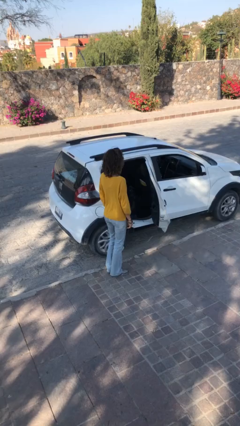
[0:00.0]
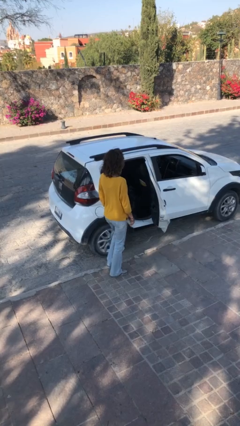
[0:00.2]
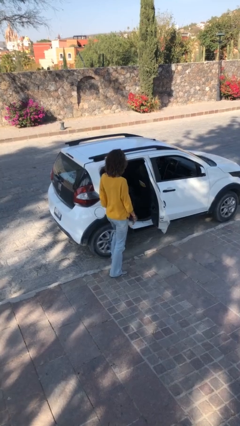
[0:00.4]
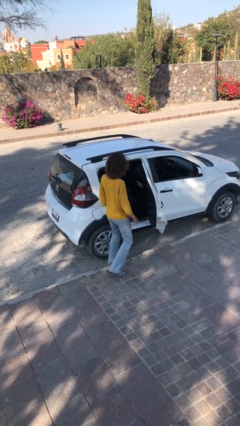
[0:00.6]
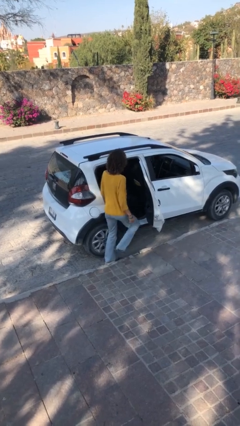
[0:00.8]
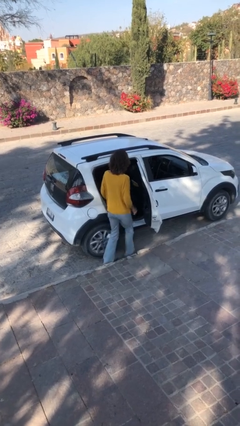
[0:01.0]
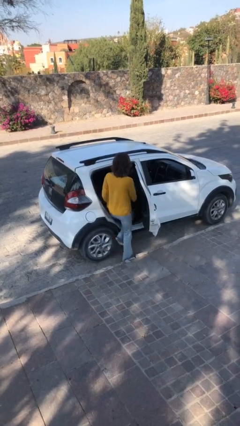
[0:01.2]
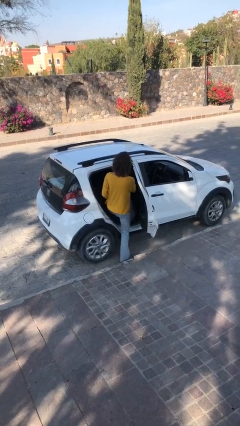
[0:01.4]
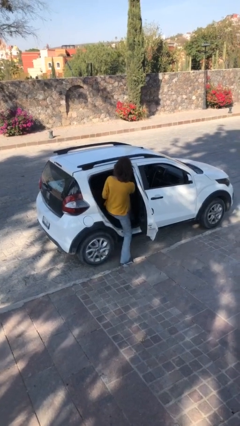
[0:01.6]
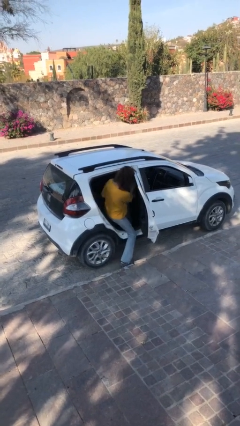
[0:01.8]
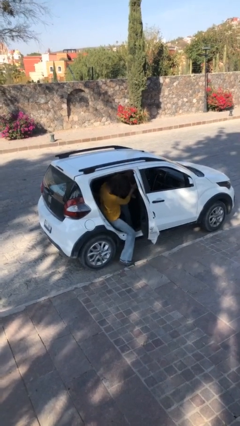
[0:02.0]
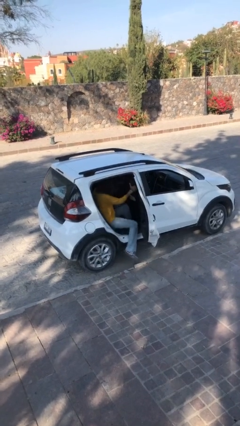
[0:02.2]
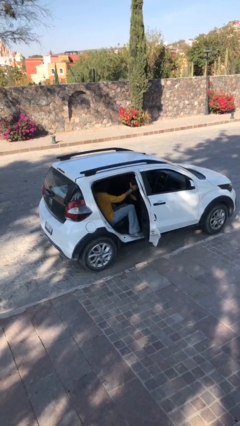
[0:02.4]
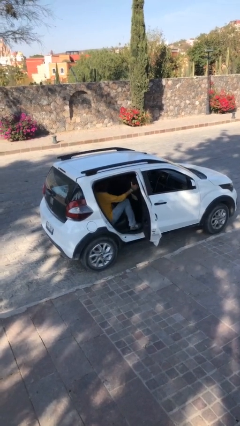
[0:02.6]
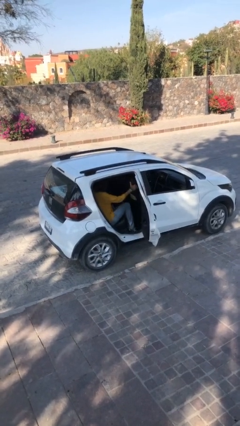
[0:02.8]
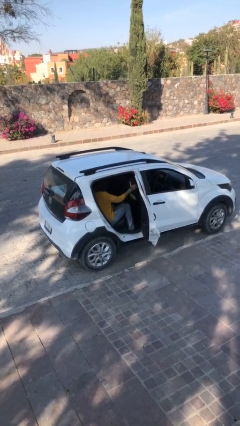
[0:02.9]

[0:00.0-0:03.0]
person enters car

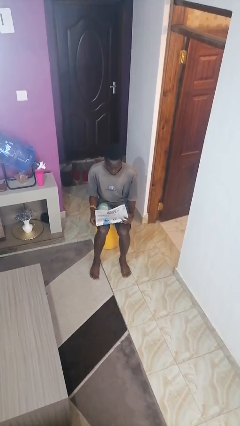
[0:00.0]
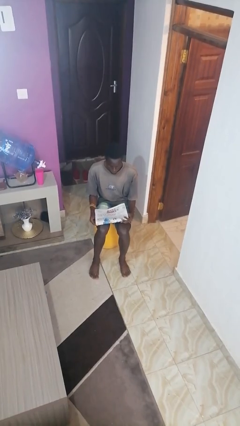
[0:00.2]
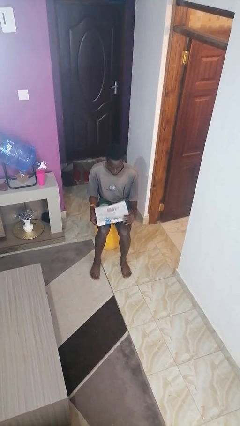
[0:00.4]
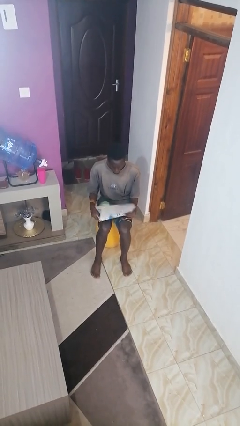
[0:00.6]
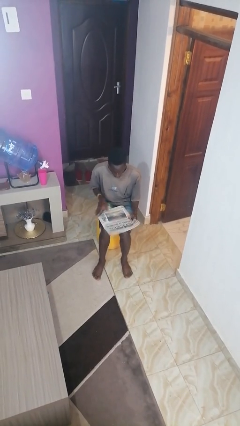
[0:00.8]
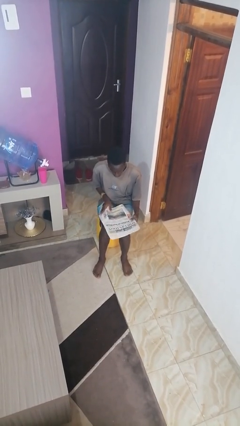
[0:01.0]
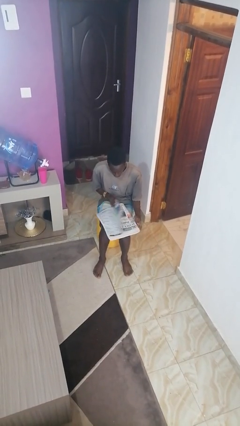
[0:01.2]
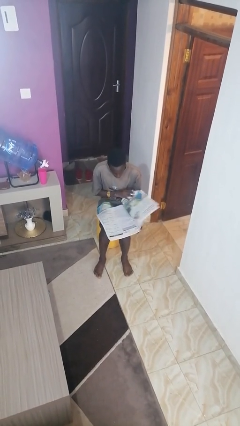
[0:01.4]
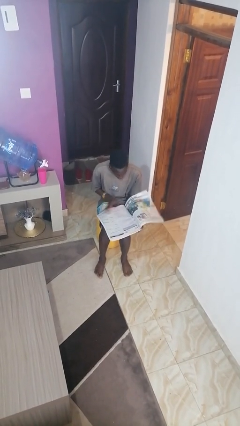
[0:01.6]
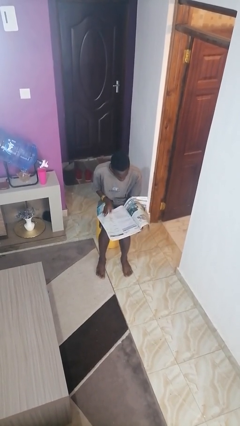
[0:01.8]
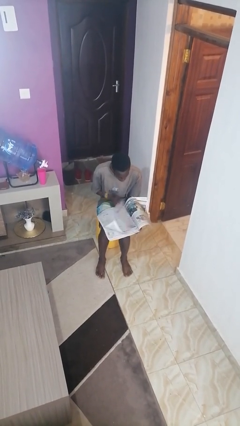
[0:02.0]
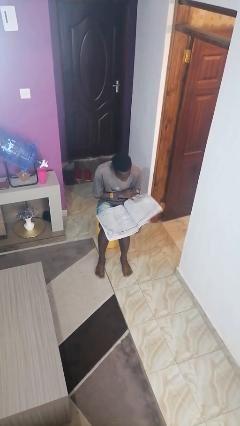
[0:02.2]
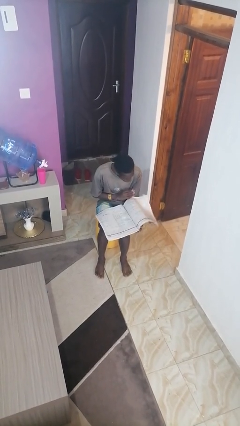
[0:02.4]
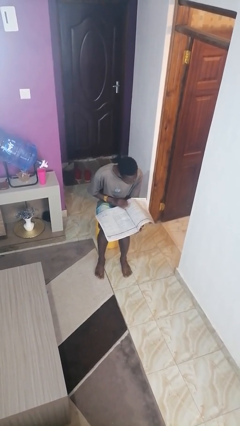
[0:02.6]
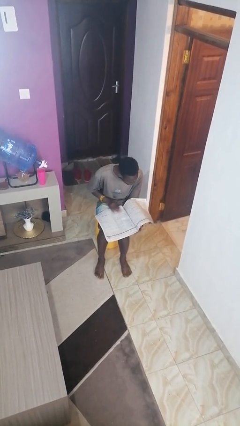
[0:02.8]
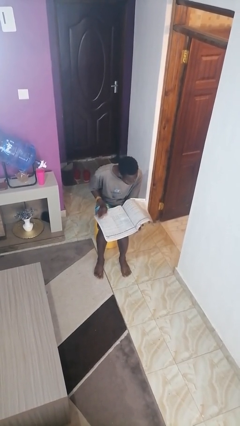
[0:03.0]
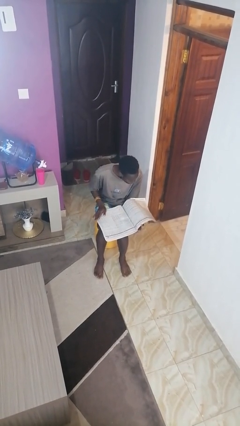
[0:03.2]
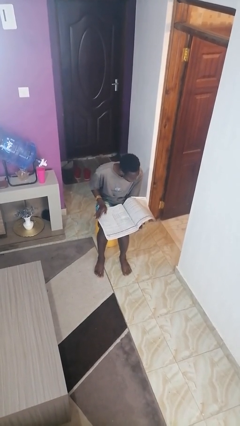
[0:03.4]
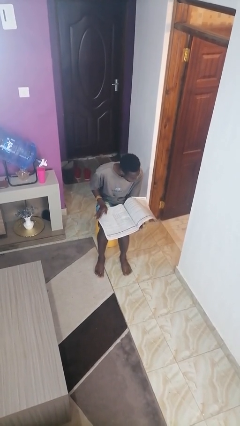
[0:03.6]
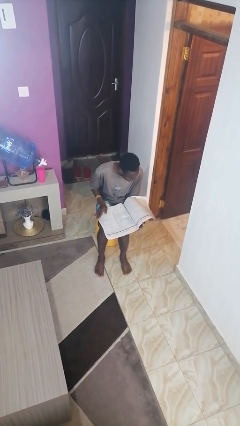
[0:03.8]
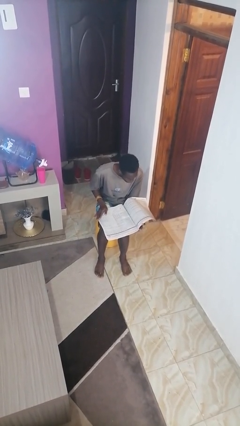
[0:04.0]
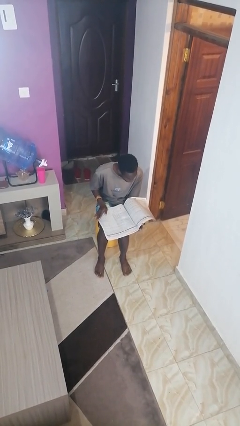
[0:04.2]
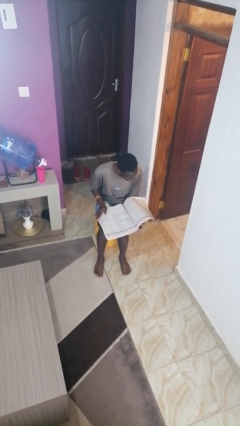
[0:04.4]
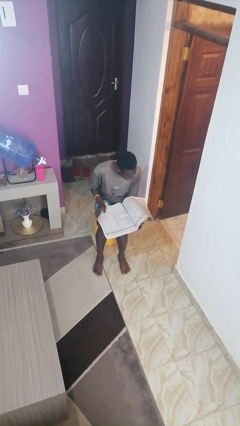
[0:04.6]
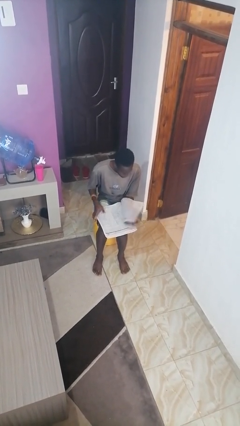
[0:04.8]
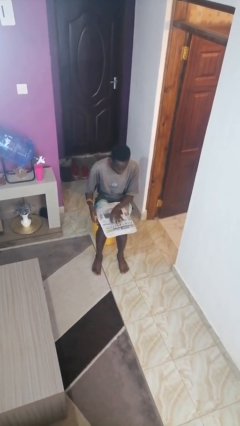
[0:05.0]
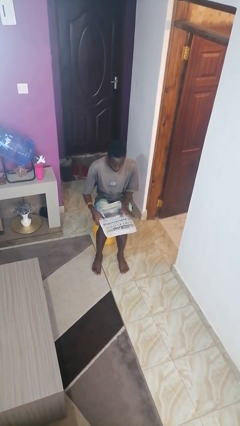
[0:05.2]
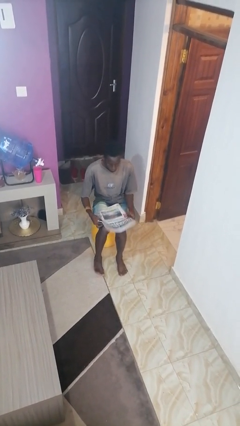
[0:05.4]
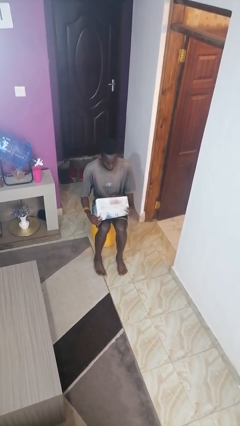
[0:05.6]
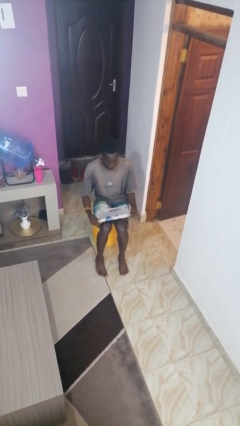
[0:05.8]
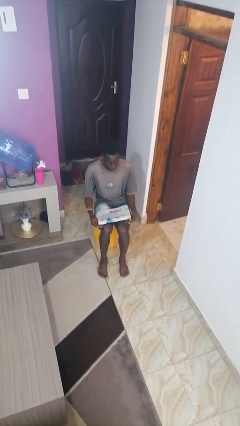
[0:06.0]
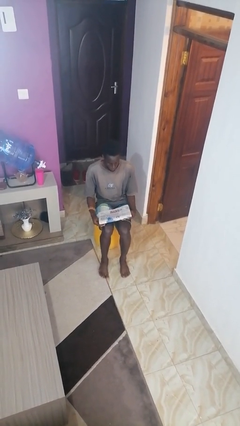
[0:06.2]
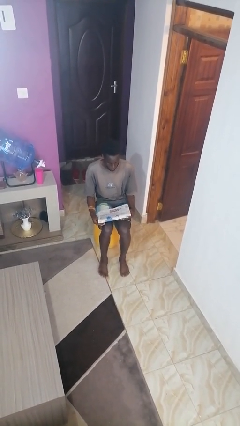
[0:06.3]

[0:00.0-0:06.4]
person reads newspaper

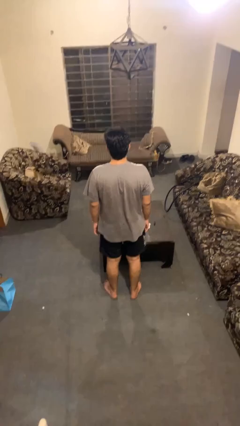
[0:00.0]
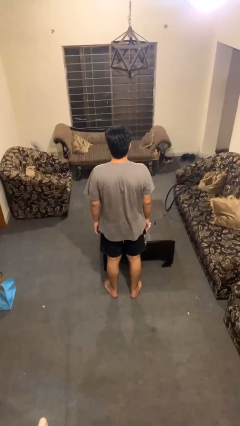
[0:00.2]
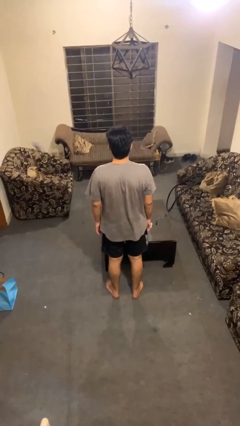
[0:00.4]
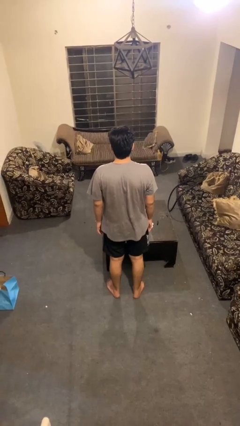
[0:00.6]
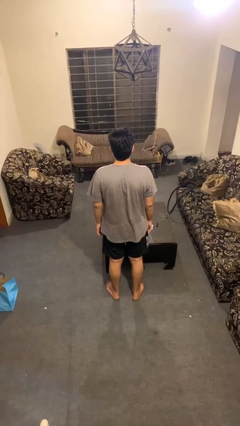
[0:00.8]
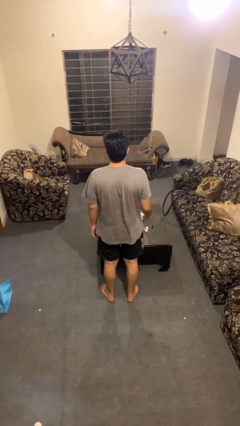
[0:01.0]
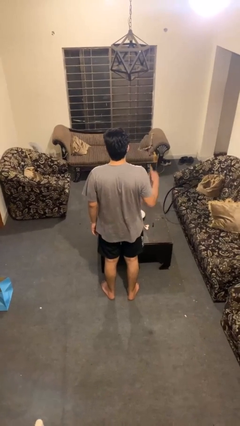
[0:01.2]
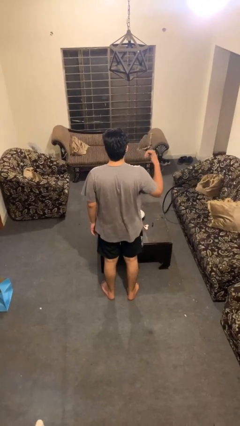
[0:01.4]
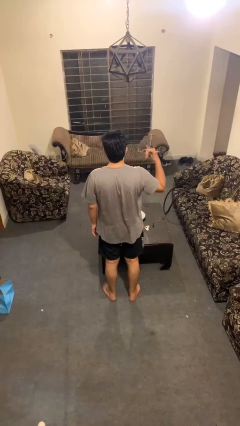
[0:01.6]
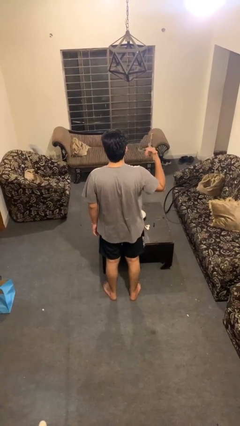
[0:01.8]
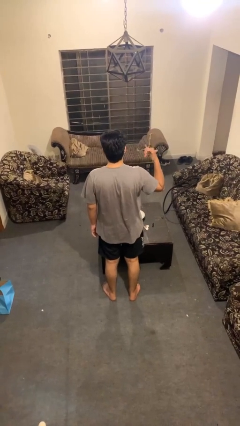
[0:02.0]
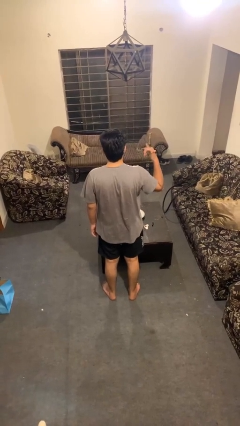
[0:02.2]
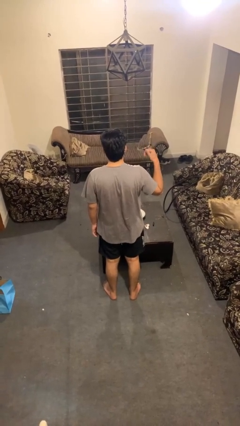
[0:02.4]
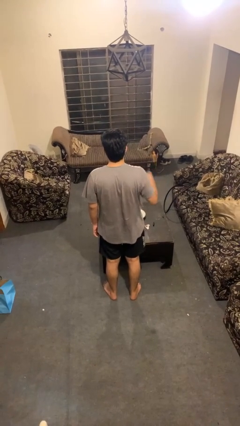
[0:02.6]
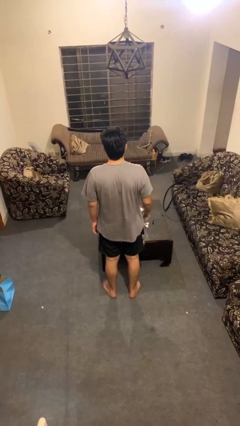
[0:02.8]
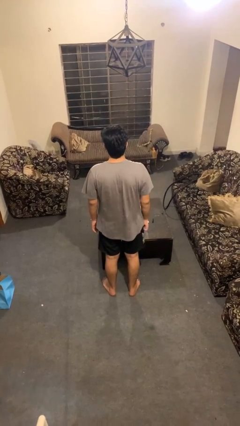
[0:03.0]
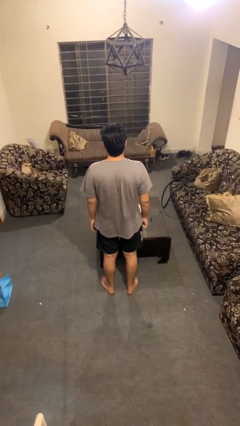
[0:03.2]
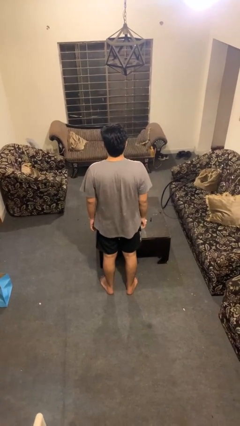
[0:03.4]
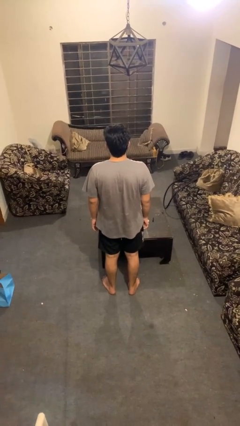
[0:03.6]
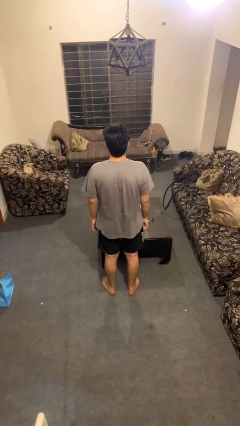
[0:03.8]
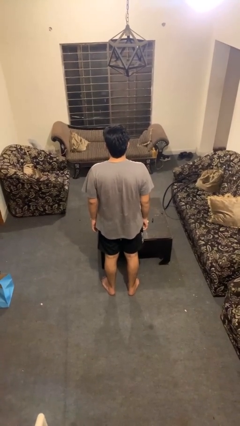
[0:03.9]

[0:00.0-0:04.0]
person gestures hang loose

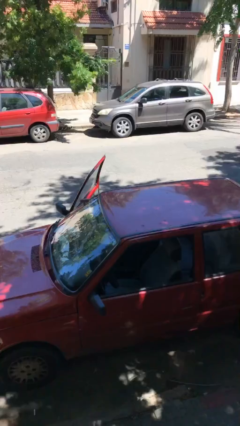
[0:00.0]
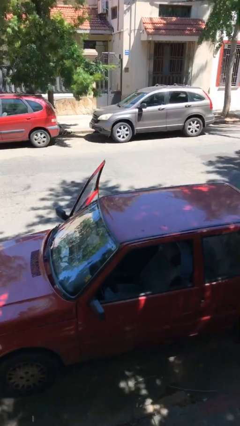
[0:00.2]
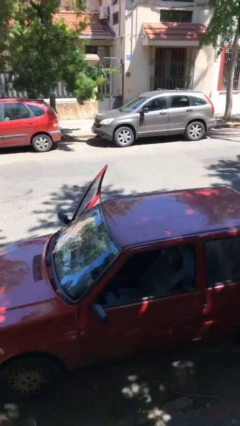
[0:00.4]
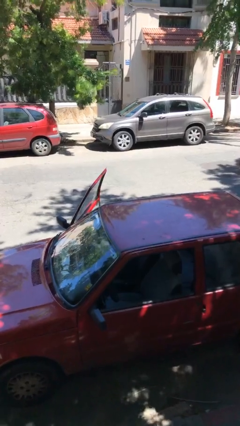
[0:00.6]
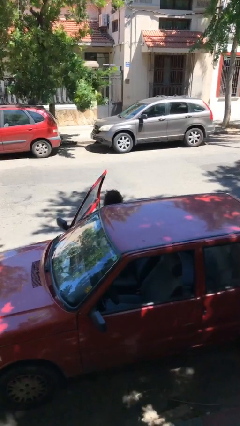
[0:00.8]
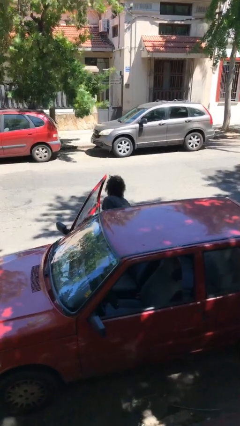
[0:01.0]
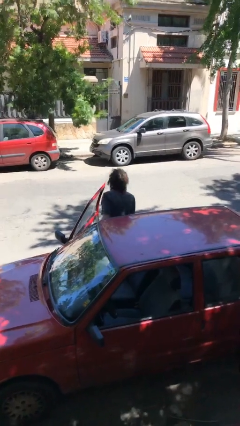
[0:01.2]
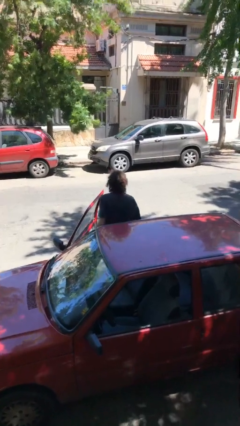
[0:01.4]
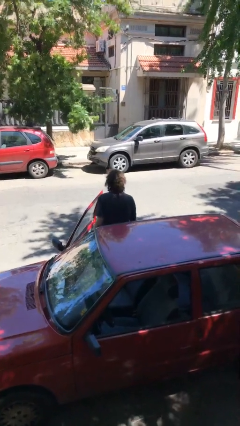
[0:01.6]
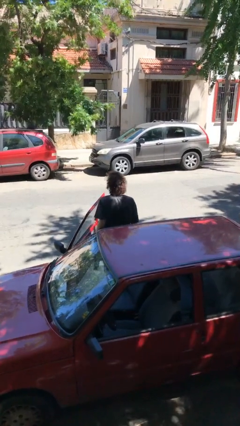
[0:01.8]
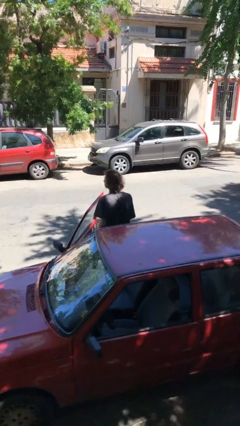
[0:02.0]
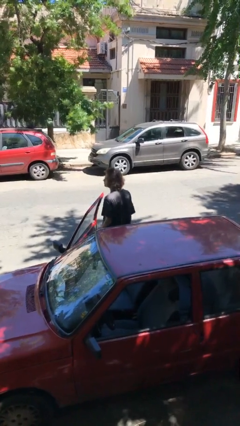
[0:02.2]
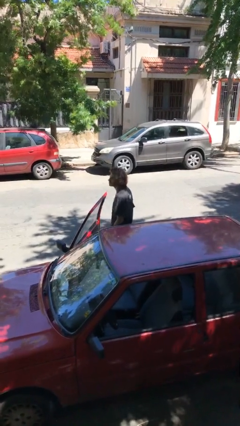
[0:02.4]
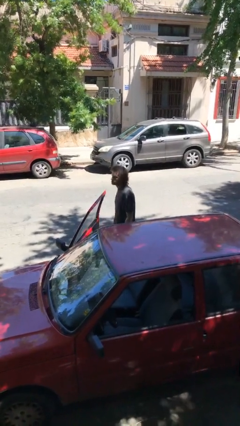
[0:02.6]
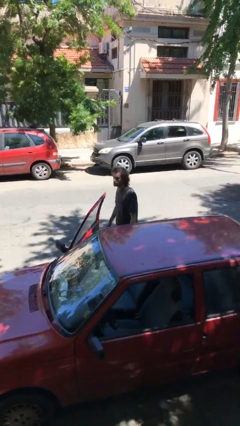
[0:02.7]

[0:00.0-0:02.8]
person exits car

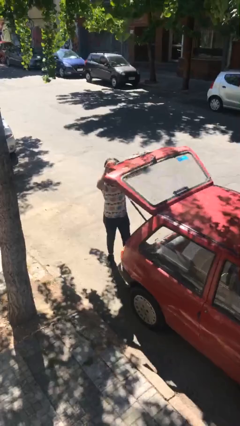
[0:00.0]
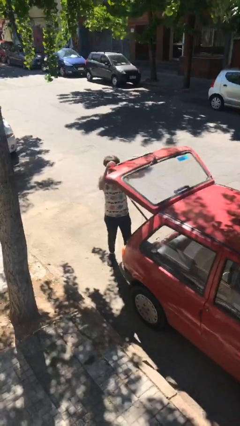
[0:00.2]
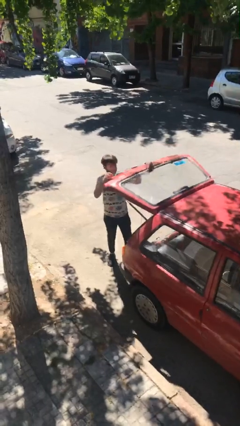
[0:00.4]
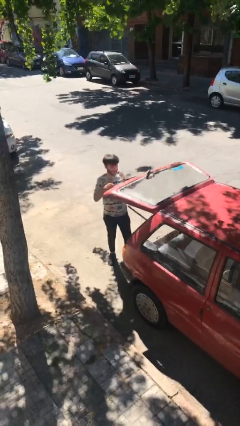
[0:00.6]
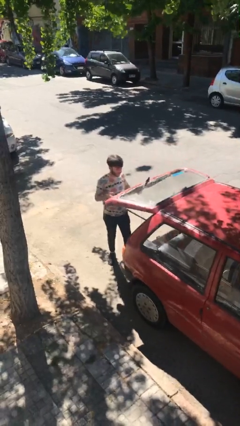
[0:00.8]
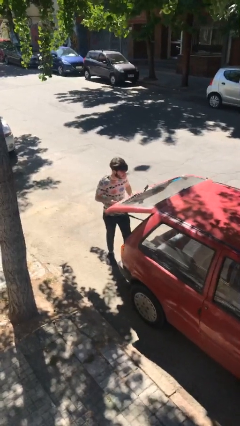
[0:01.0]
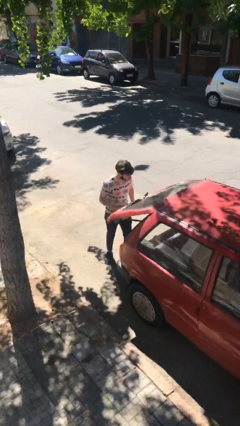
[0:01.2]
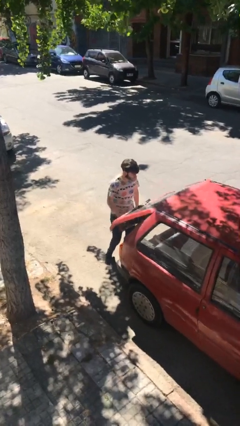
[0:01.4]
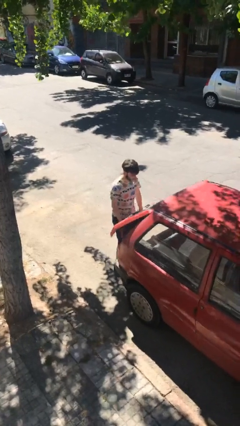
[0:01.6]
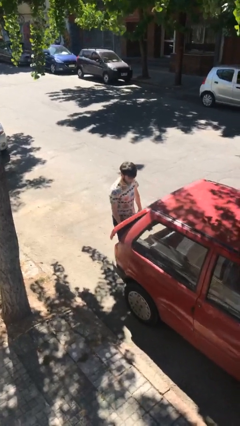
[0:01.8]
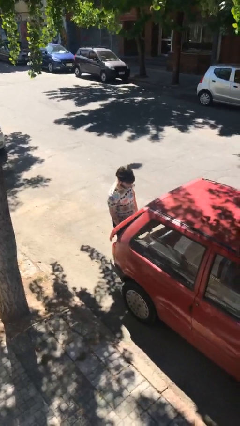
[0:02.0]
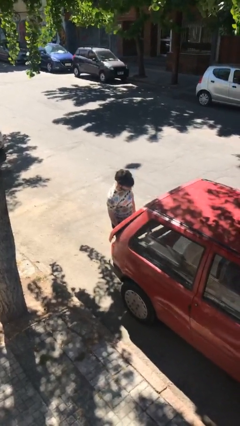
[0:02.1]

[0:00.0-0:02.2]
person closes car trunk
